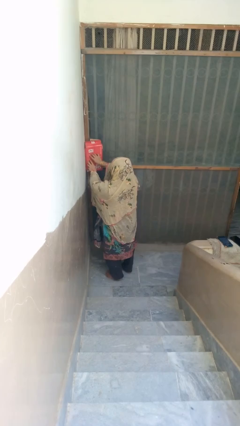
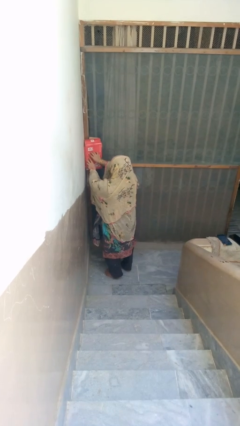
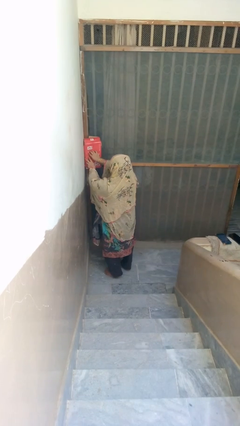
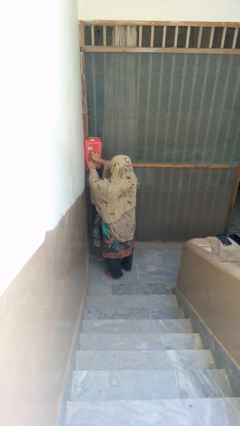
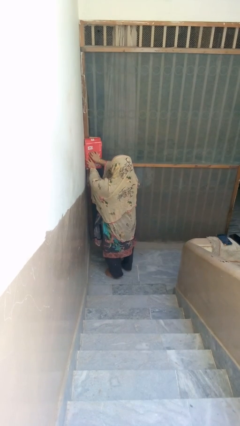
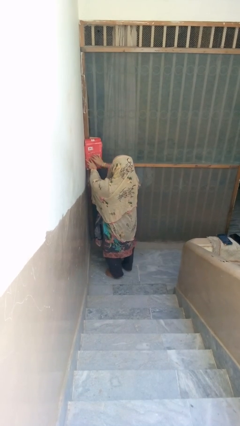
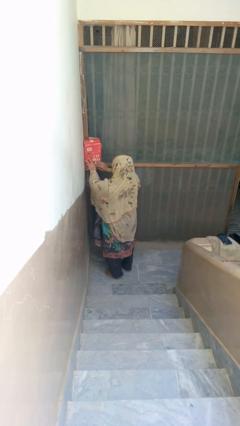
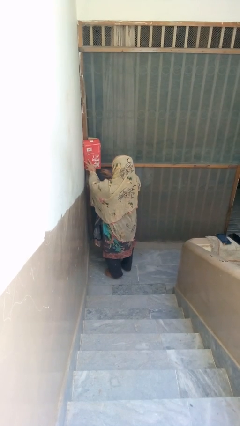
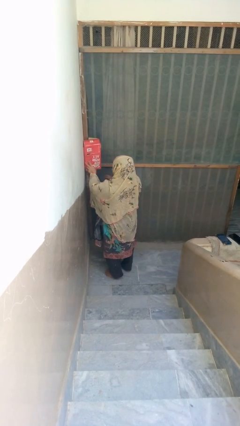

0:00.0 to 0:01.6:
person closes mailbox

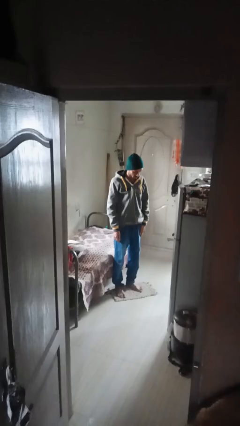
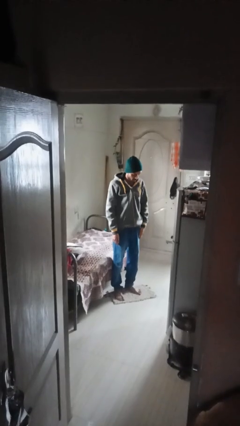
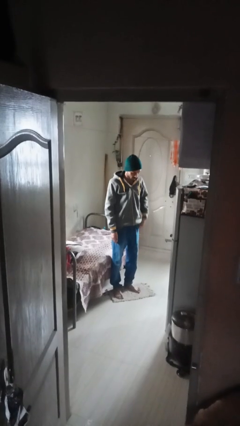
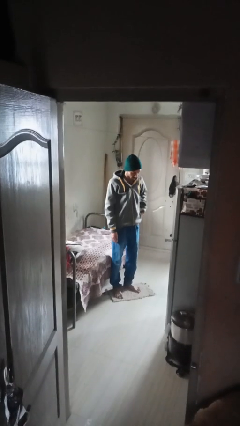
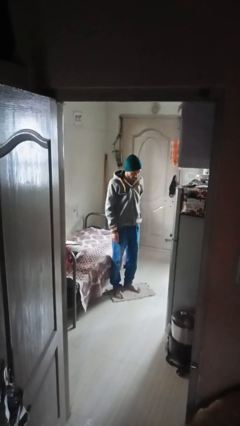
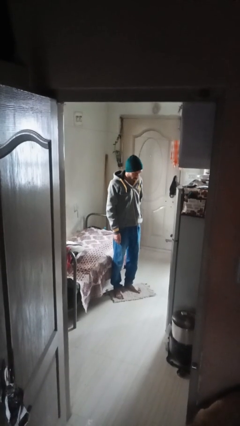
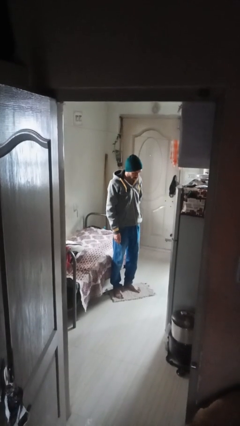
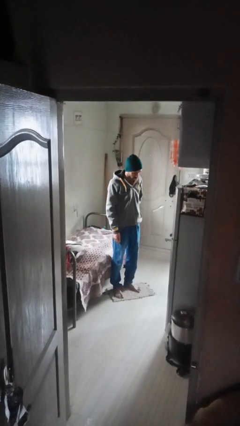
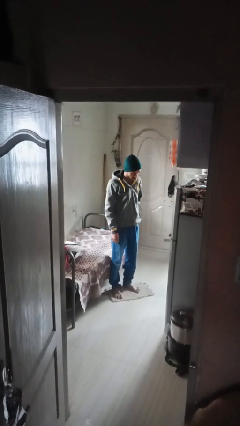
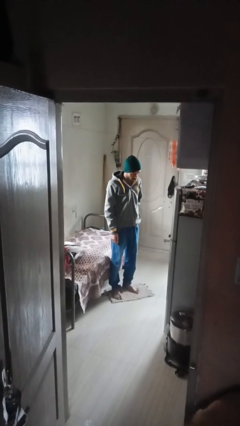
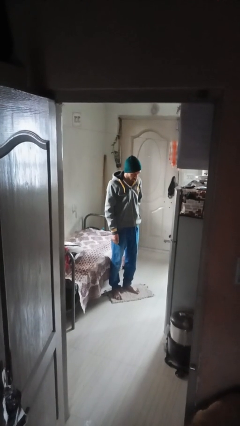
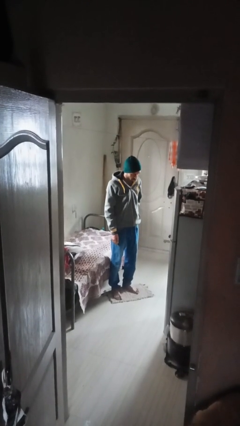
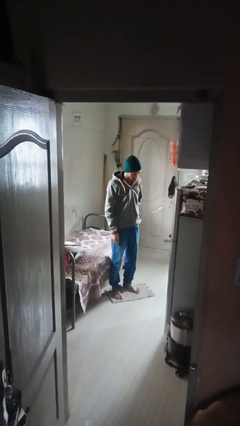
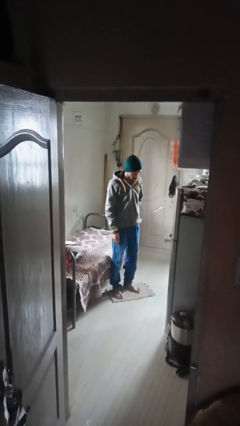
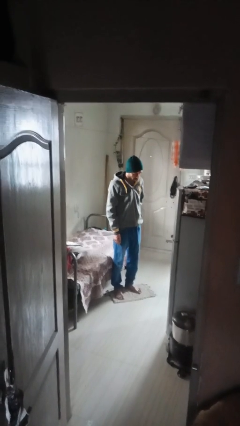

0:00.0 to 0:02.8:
person puts hands in back pockets

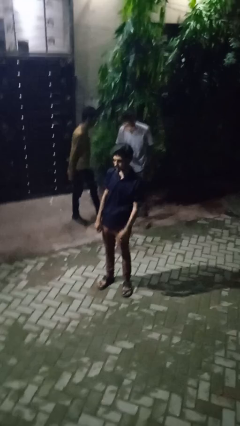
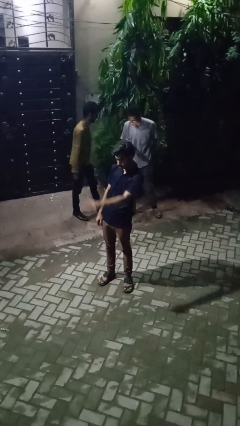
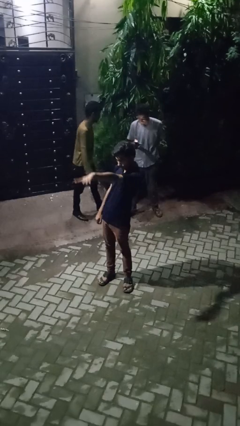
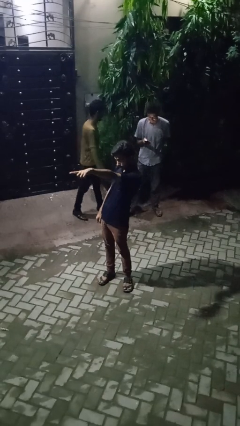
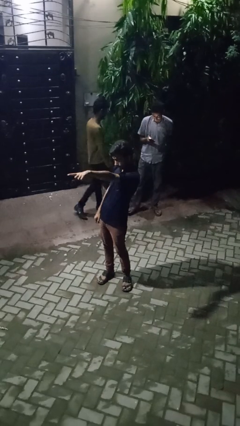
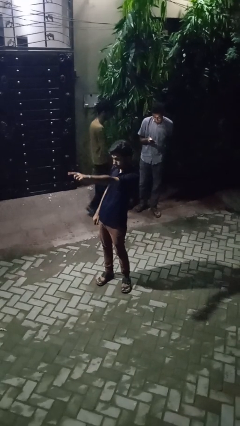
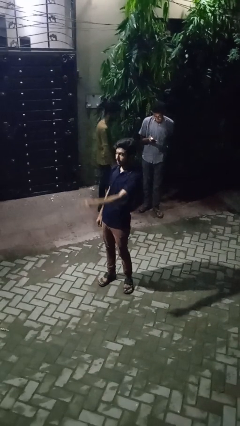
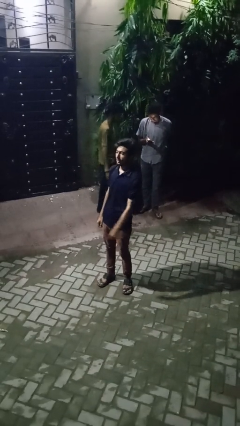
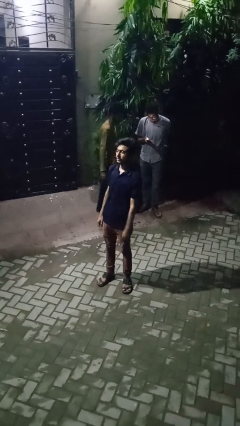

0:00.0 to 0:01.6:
person points at person

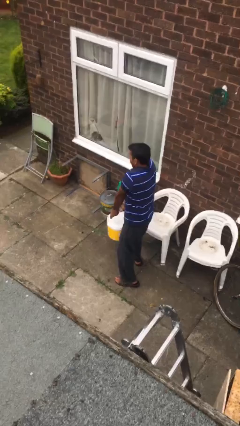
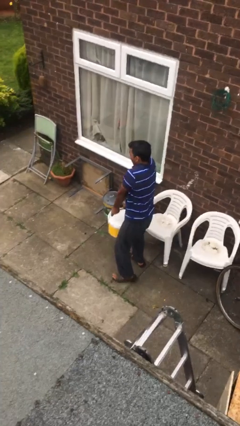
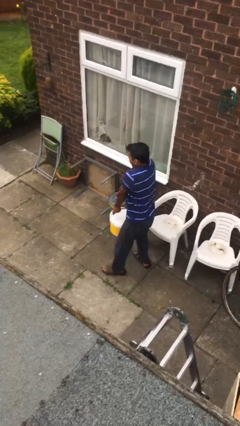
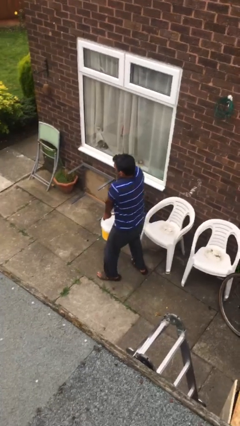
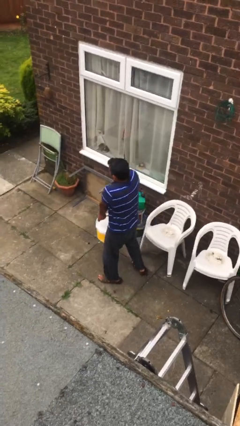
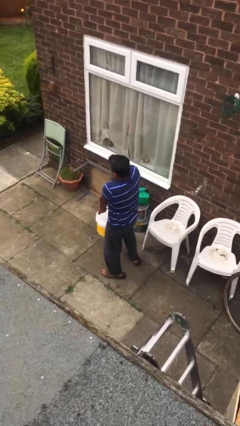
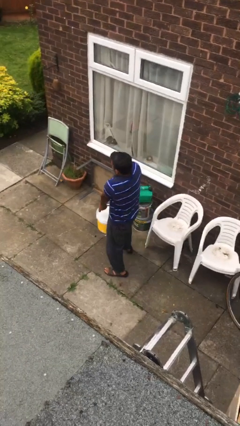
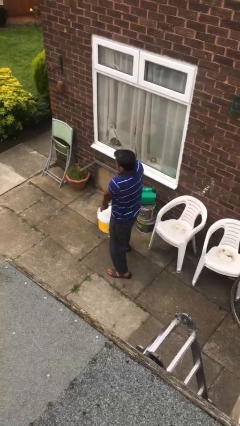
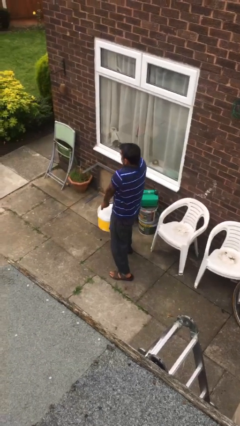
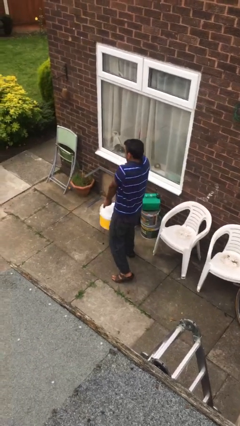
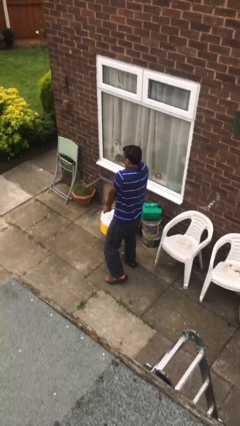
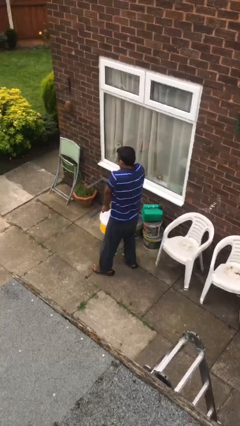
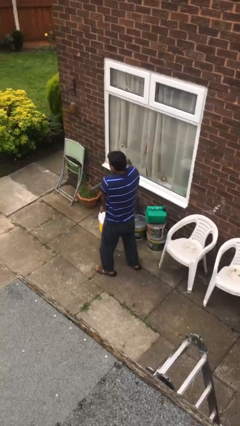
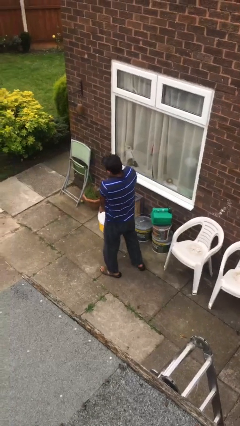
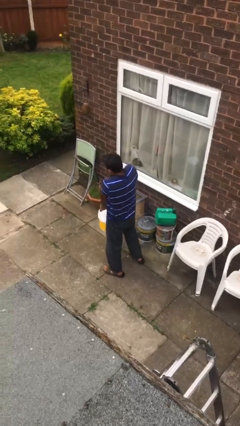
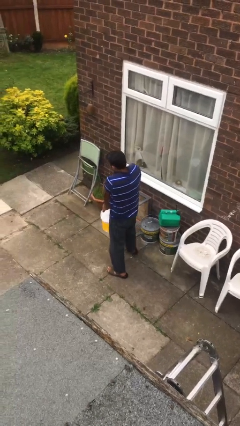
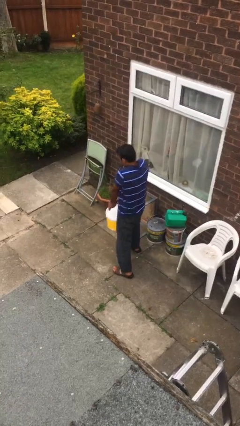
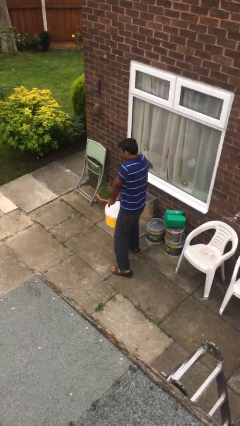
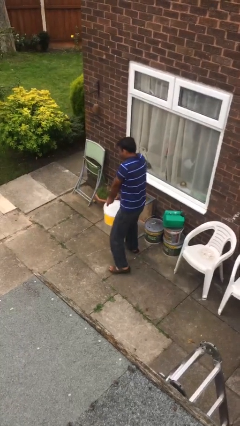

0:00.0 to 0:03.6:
person carries heavy object

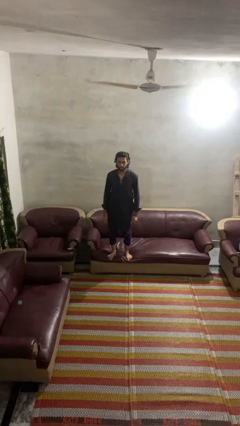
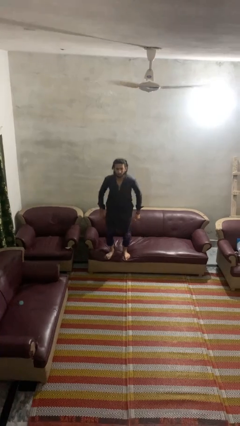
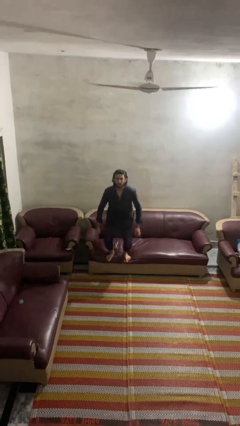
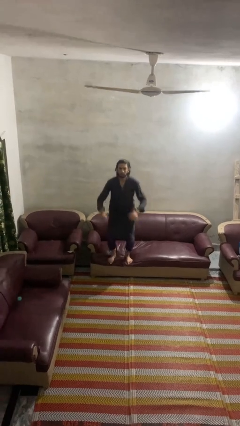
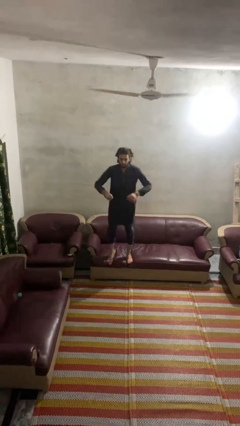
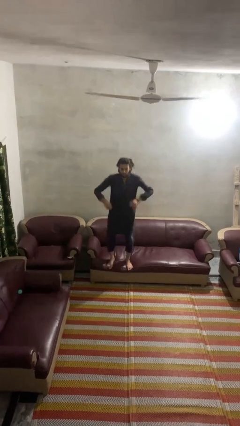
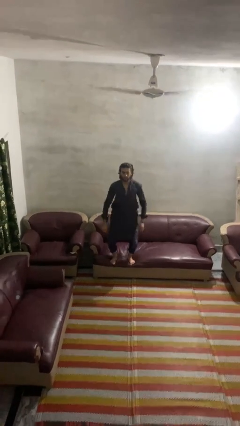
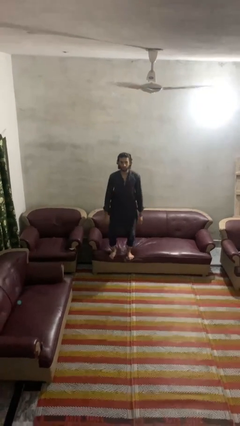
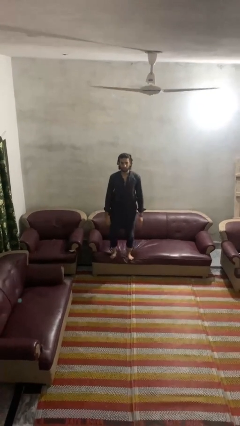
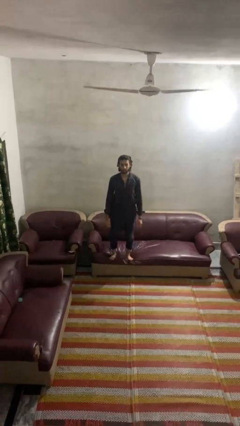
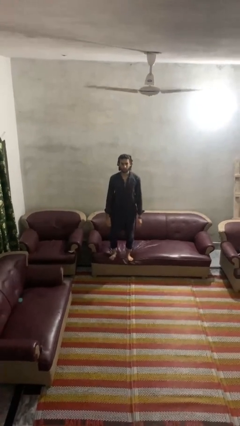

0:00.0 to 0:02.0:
person jumps on couch

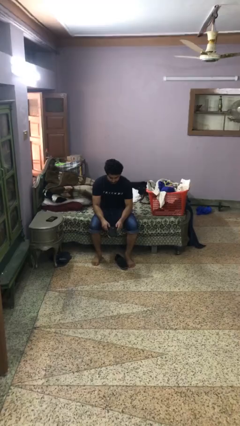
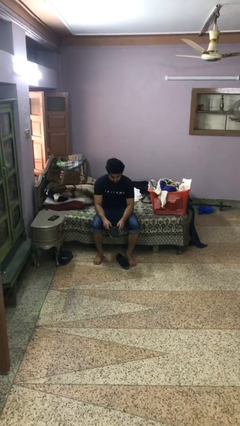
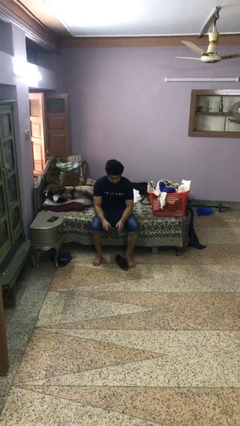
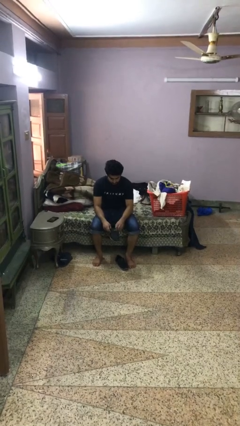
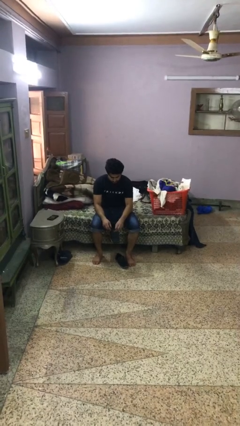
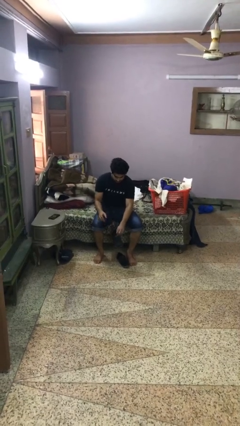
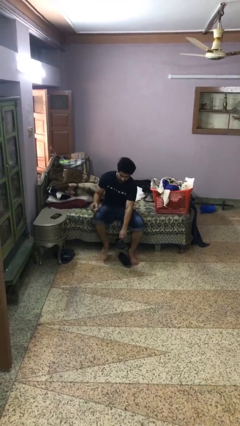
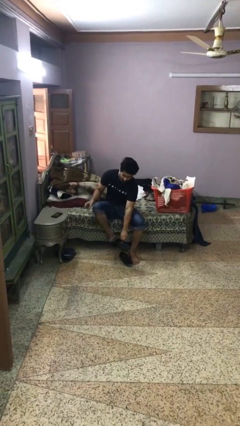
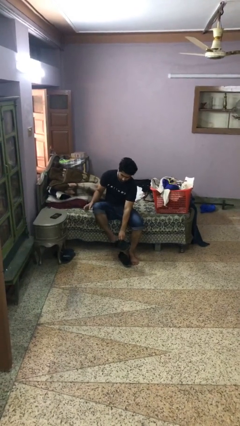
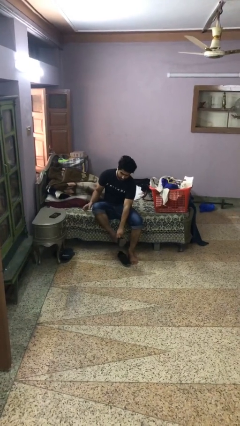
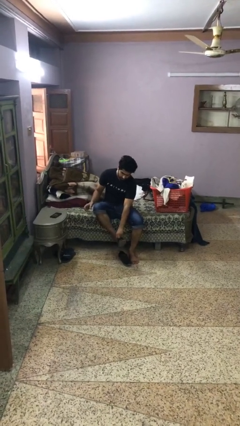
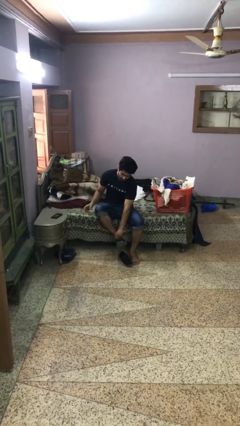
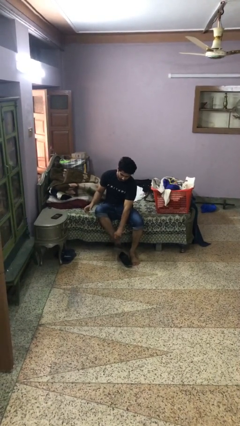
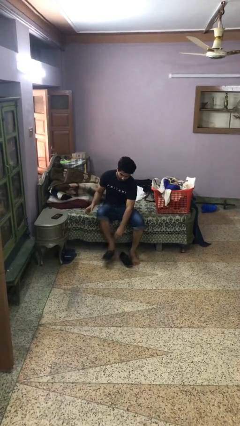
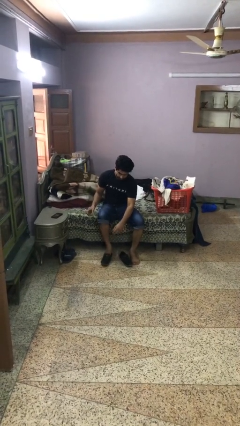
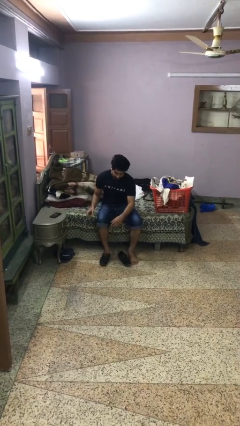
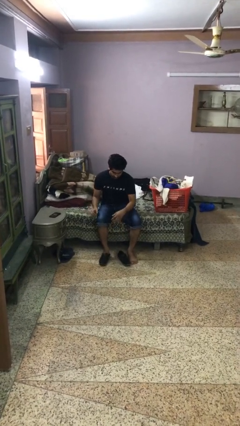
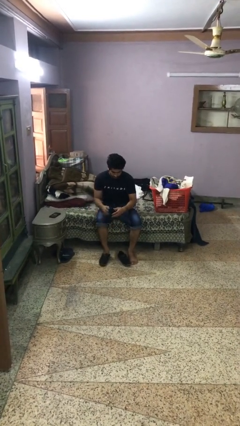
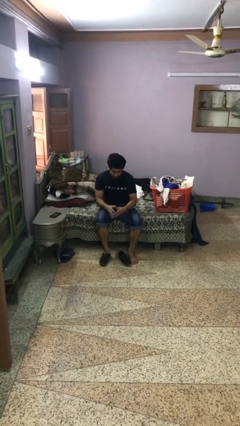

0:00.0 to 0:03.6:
person puts on boots

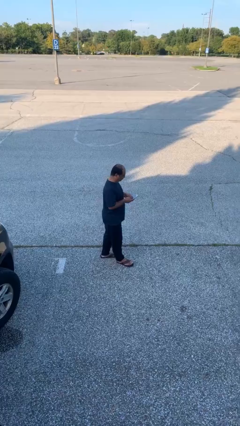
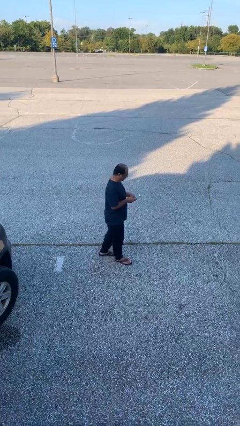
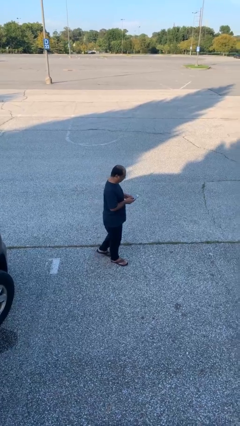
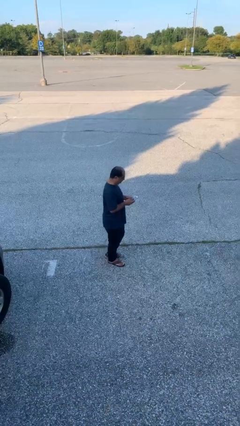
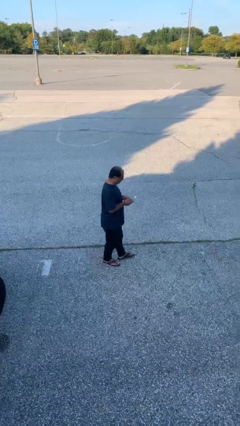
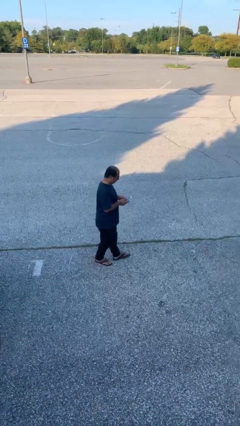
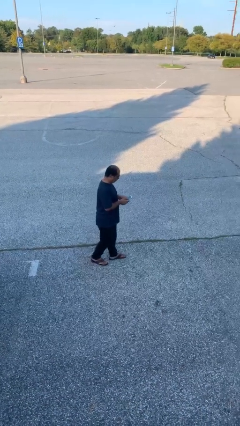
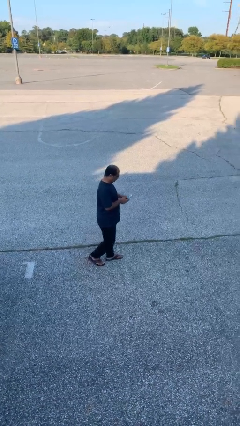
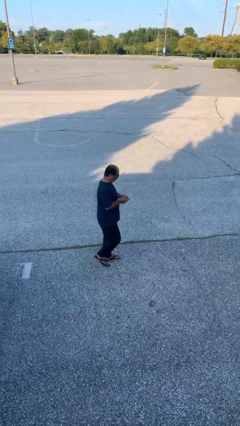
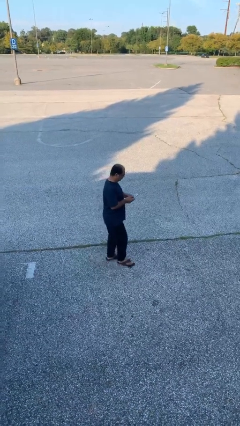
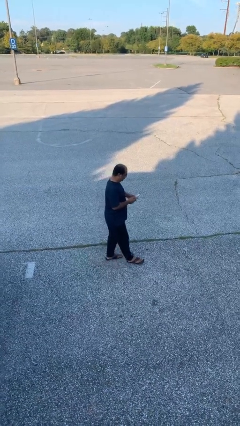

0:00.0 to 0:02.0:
person texts on phone
